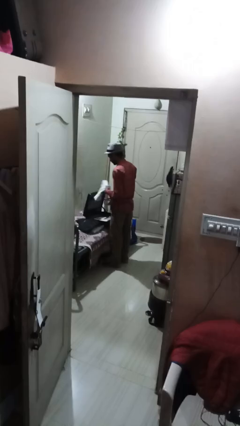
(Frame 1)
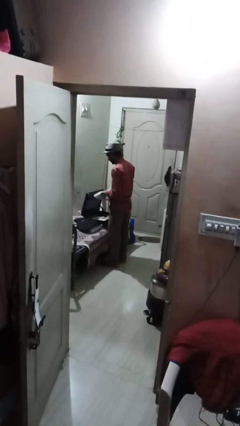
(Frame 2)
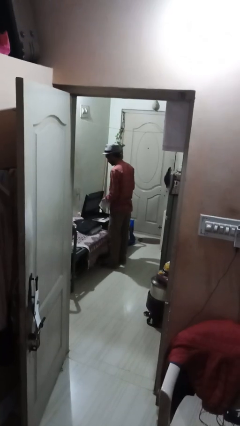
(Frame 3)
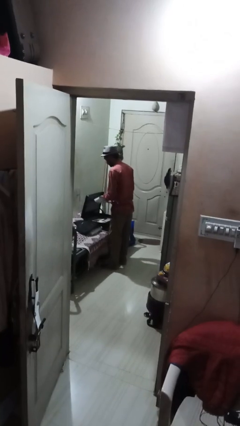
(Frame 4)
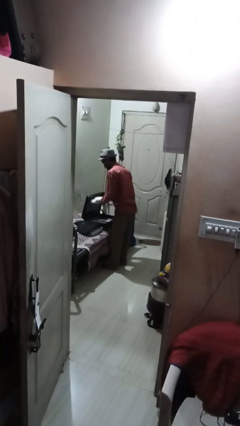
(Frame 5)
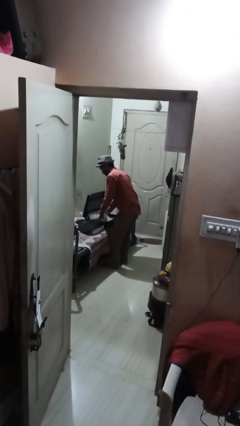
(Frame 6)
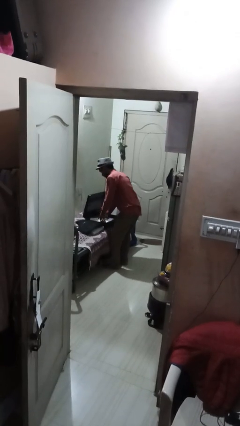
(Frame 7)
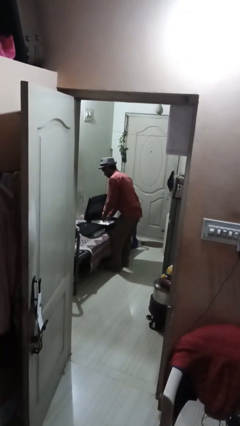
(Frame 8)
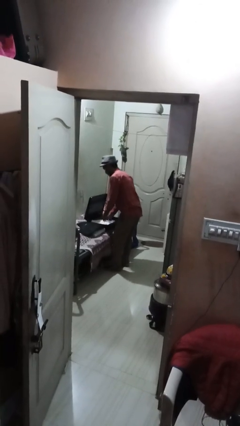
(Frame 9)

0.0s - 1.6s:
person loads clothes into suitcase

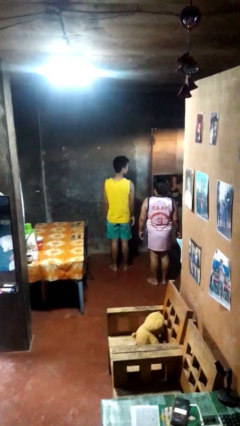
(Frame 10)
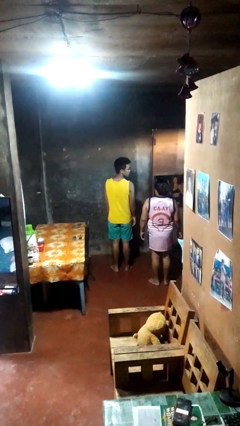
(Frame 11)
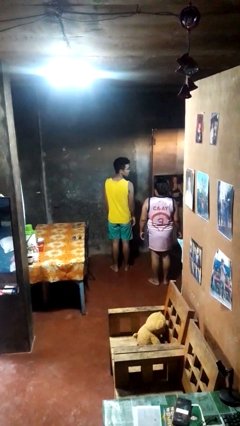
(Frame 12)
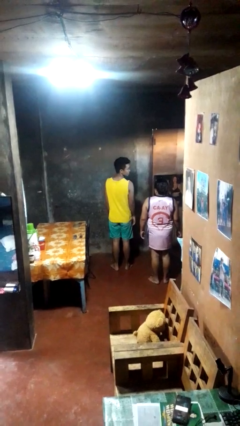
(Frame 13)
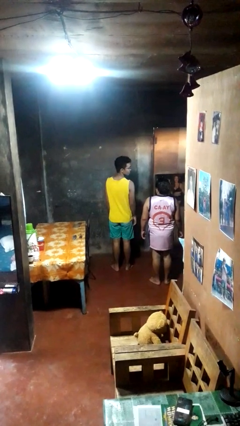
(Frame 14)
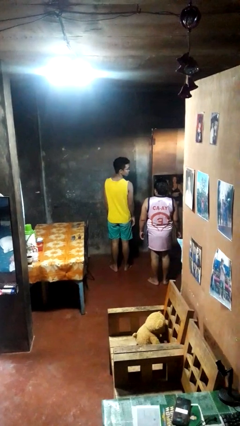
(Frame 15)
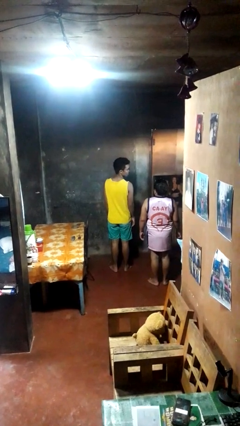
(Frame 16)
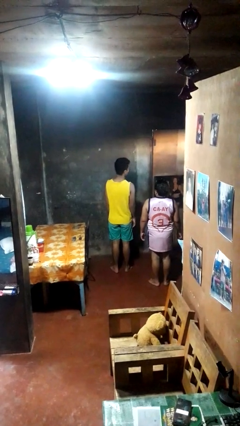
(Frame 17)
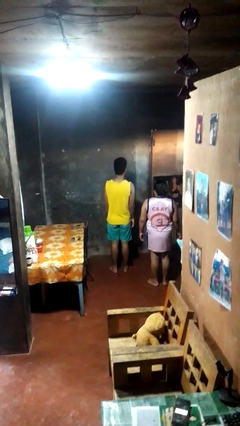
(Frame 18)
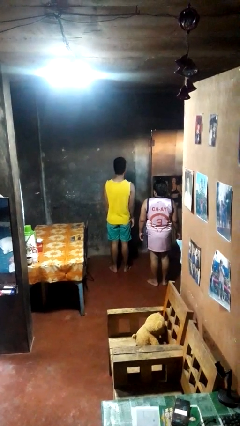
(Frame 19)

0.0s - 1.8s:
person looks over shoulder

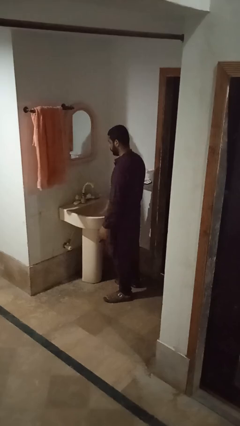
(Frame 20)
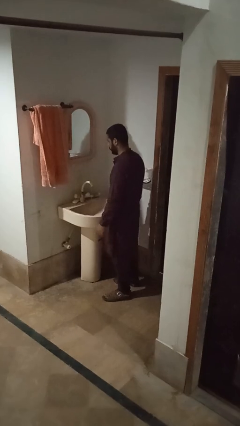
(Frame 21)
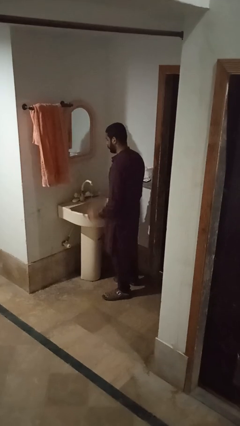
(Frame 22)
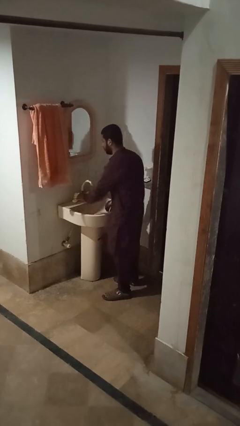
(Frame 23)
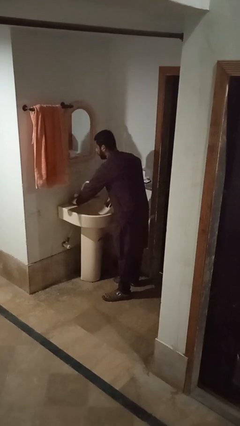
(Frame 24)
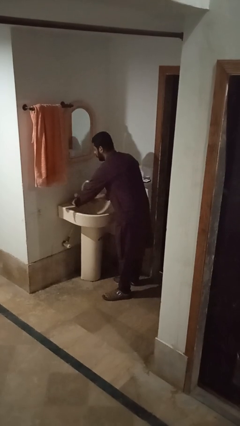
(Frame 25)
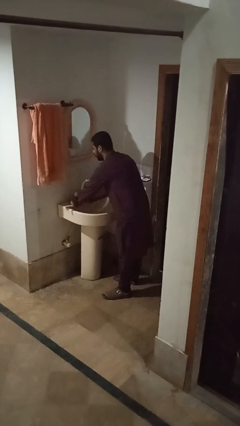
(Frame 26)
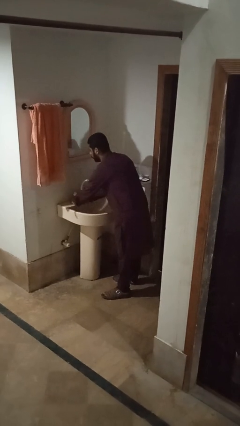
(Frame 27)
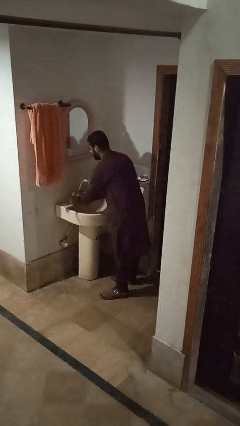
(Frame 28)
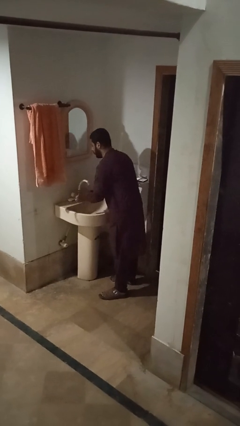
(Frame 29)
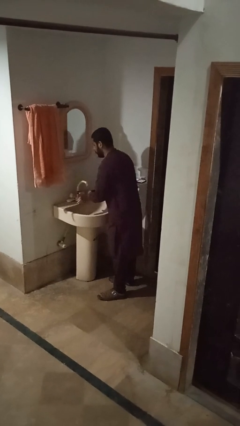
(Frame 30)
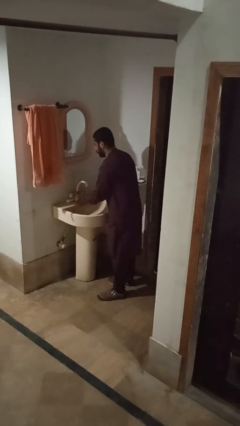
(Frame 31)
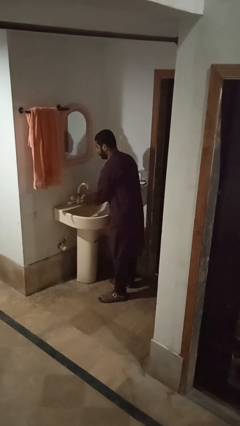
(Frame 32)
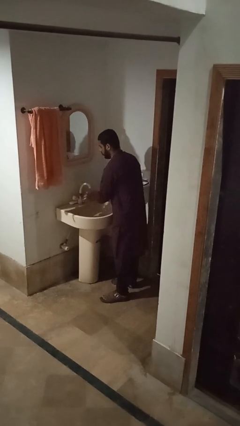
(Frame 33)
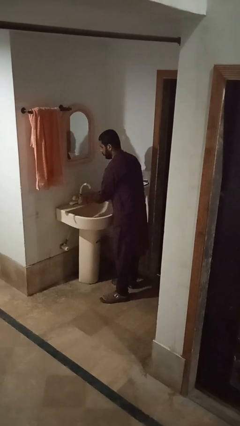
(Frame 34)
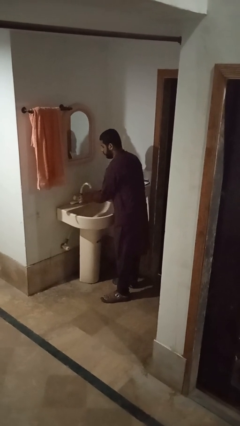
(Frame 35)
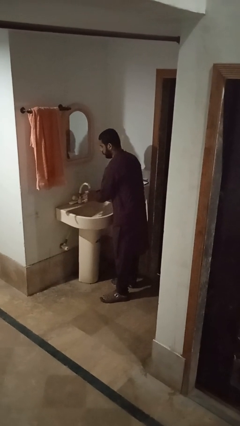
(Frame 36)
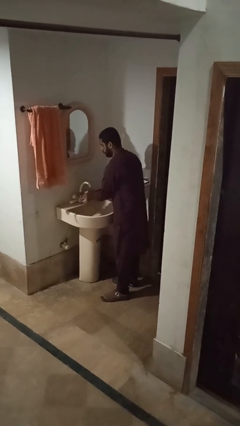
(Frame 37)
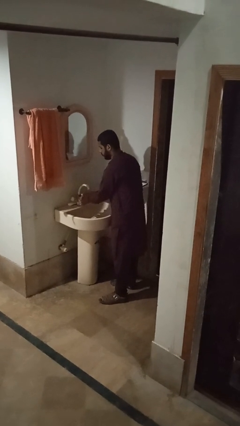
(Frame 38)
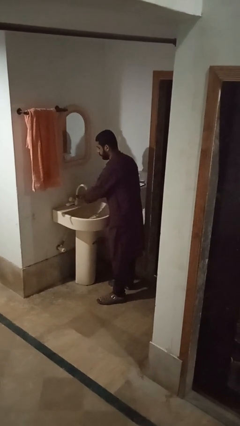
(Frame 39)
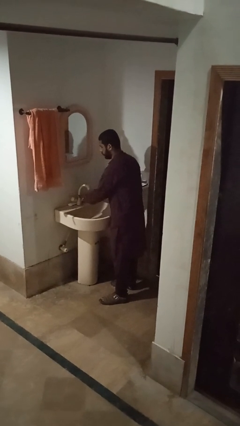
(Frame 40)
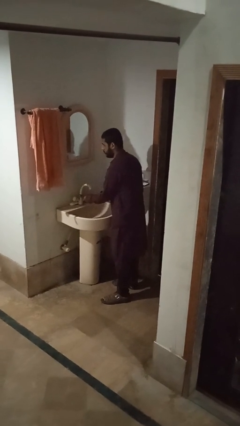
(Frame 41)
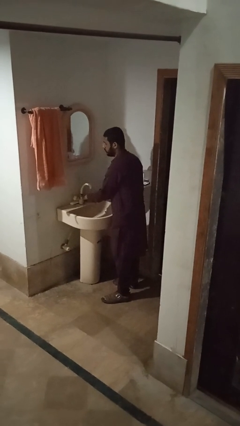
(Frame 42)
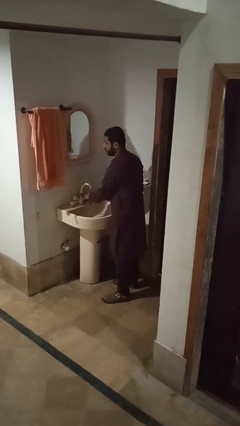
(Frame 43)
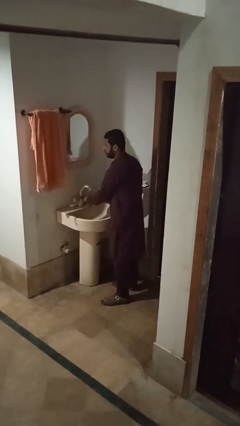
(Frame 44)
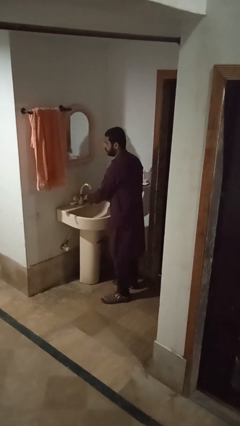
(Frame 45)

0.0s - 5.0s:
person washes hands

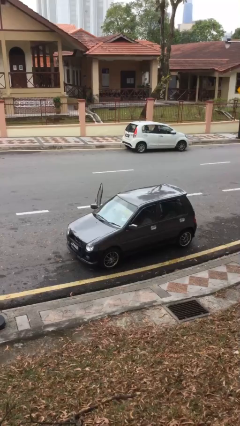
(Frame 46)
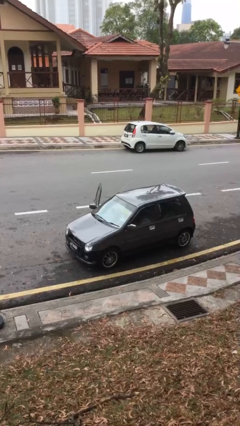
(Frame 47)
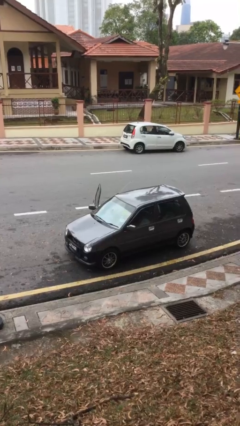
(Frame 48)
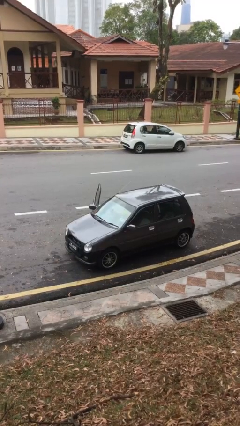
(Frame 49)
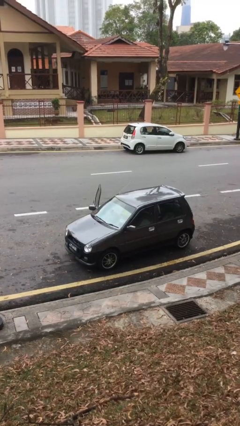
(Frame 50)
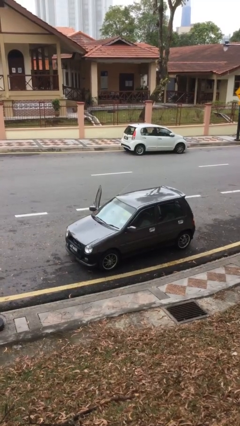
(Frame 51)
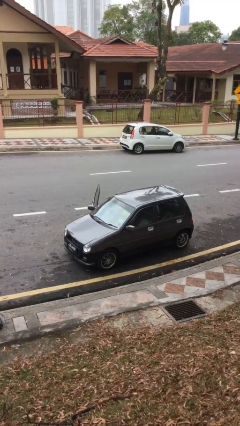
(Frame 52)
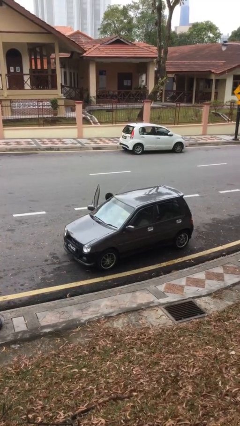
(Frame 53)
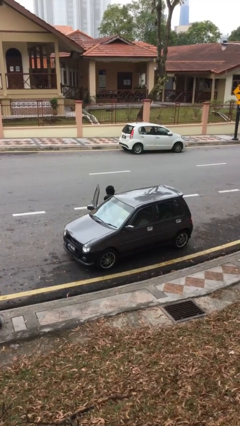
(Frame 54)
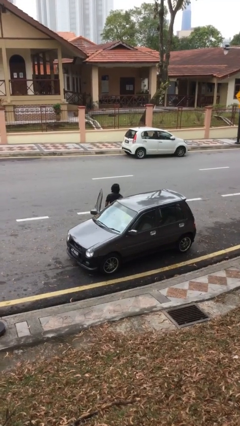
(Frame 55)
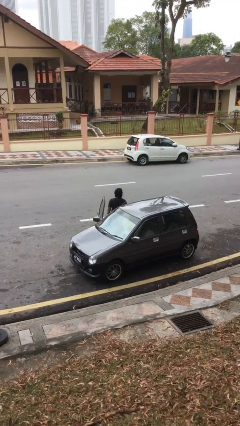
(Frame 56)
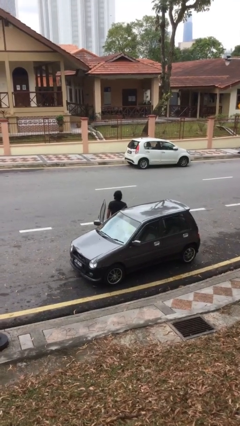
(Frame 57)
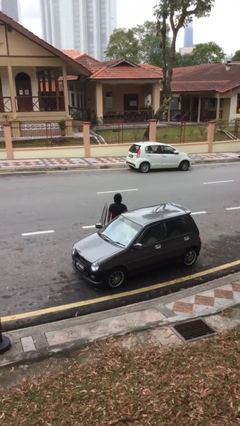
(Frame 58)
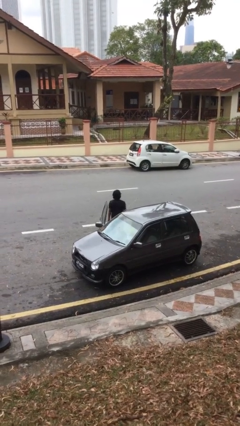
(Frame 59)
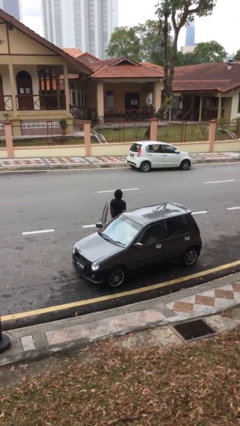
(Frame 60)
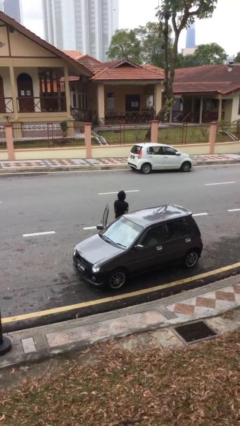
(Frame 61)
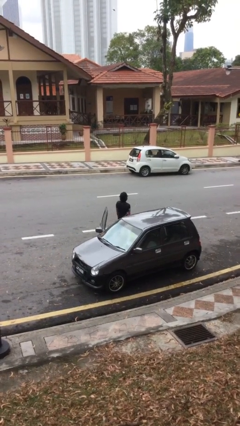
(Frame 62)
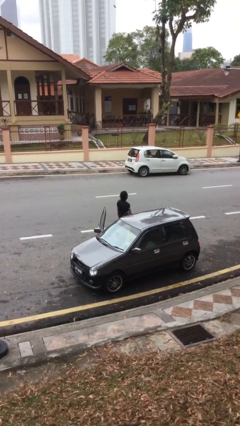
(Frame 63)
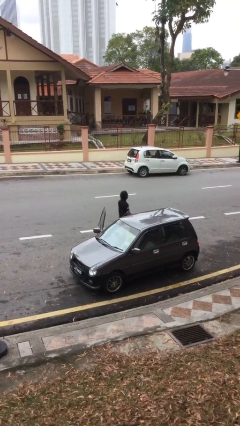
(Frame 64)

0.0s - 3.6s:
person exits car

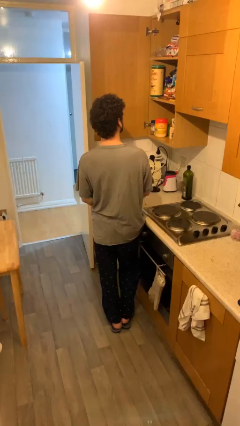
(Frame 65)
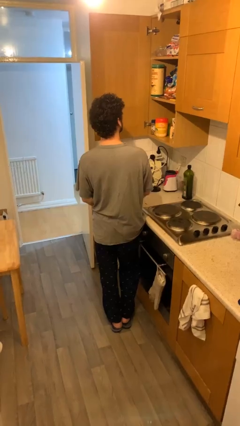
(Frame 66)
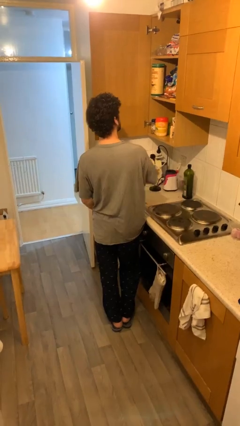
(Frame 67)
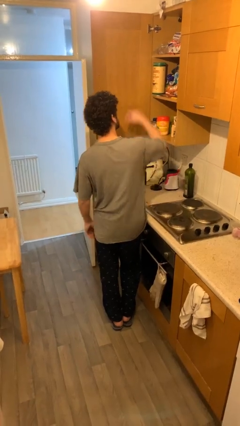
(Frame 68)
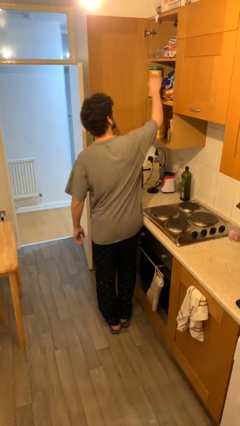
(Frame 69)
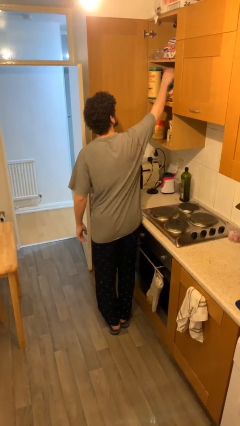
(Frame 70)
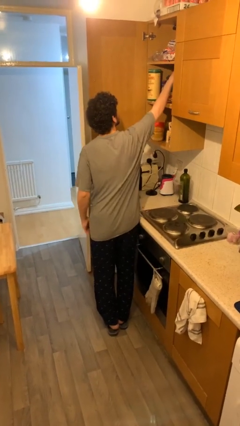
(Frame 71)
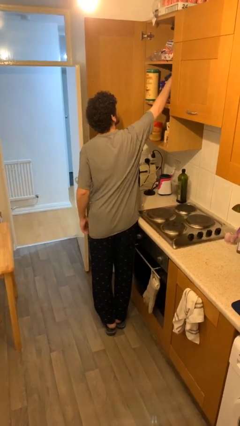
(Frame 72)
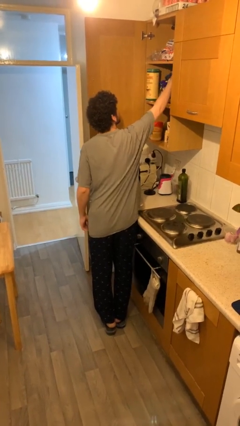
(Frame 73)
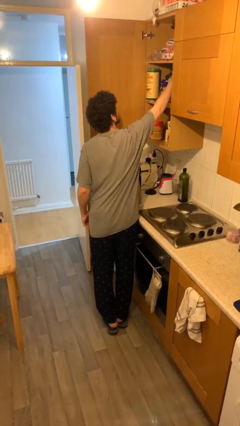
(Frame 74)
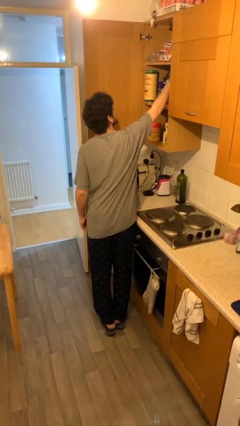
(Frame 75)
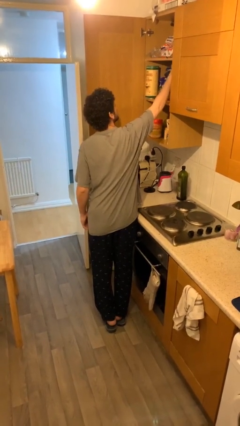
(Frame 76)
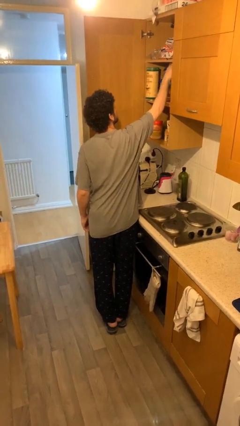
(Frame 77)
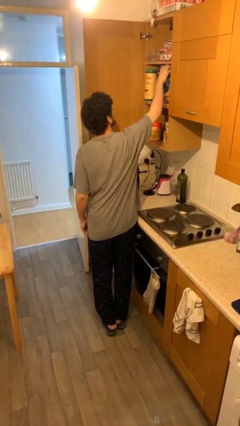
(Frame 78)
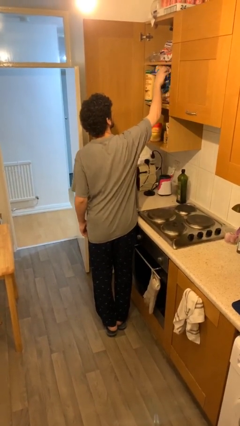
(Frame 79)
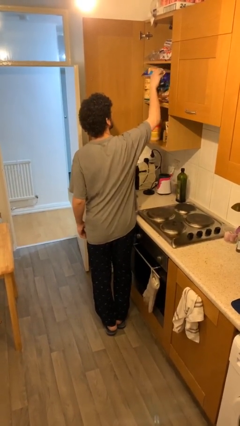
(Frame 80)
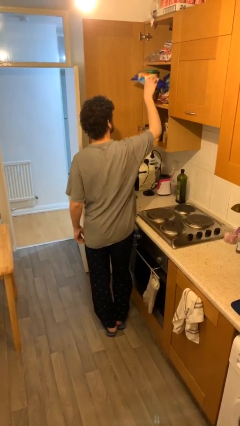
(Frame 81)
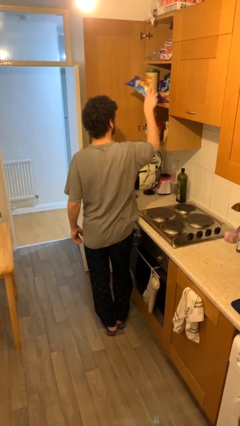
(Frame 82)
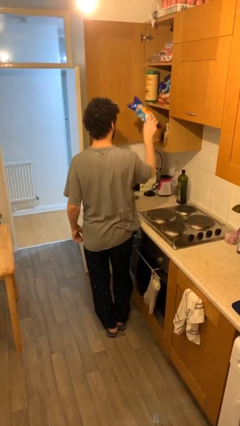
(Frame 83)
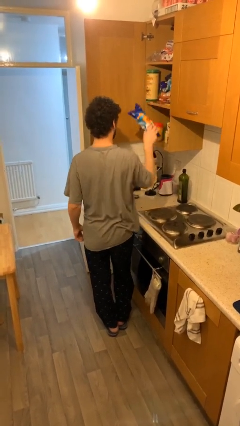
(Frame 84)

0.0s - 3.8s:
person picks up object from shelf

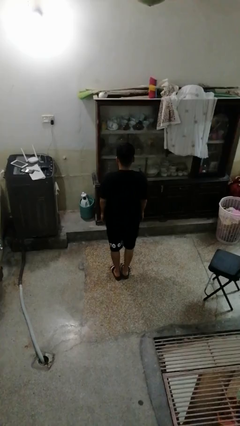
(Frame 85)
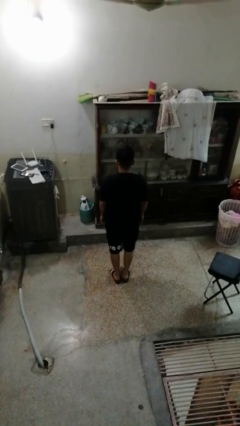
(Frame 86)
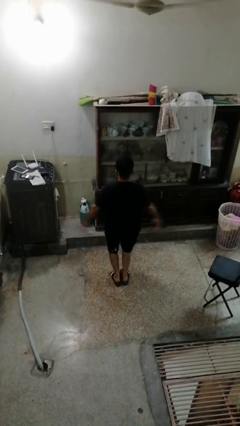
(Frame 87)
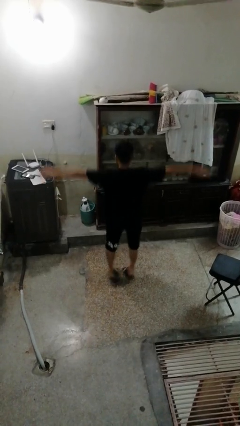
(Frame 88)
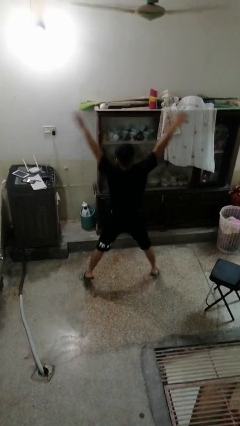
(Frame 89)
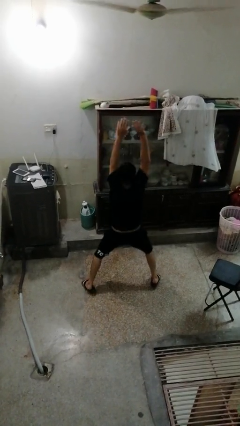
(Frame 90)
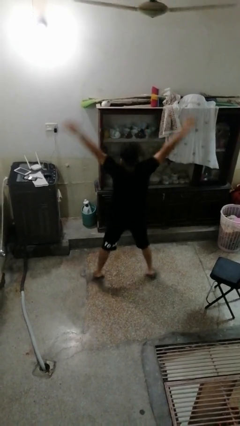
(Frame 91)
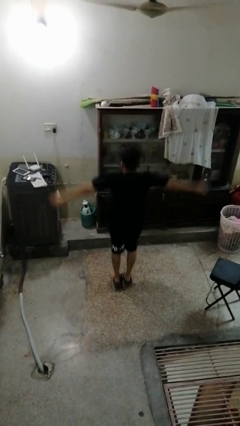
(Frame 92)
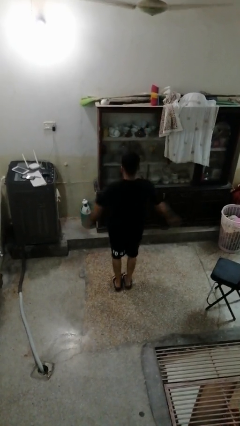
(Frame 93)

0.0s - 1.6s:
person exercises with jumping jacks
